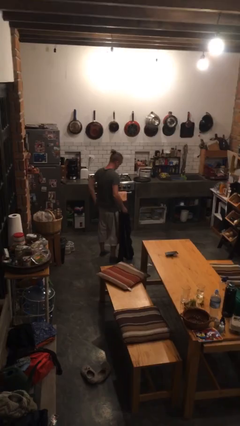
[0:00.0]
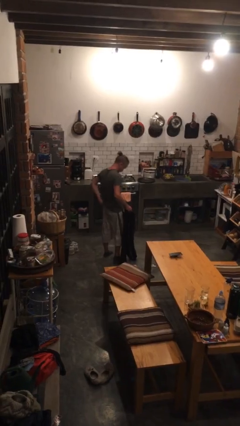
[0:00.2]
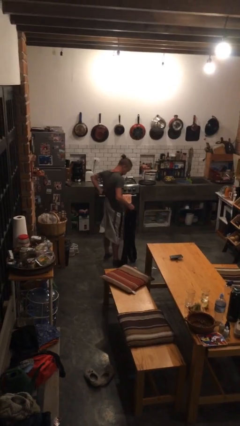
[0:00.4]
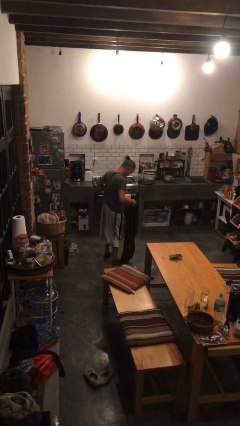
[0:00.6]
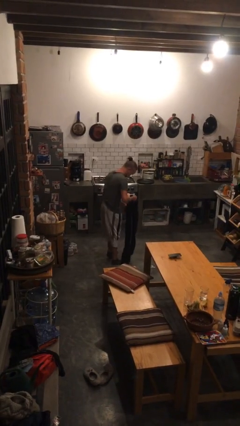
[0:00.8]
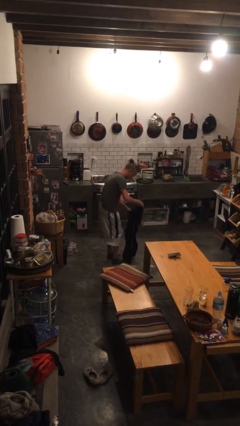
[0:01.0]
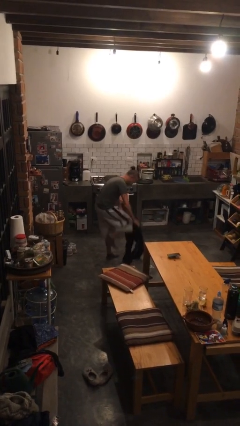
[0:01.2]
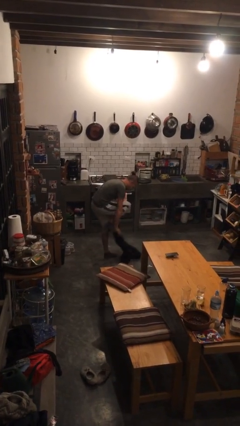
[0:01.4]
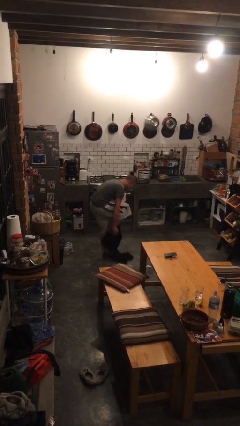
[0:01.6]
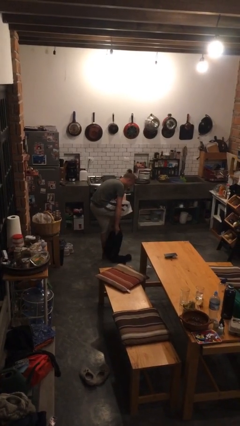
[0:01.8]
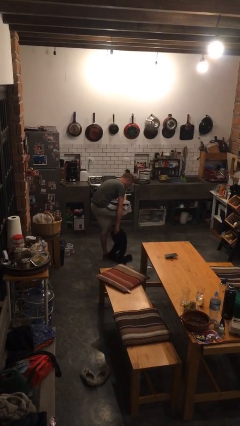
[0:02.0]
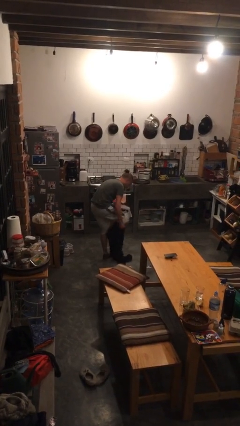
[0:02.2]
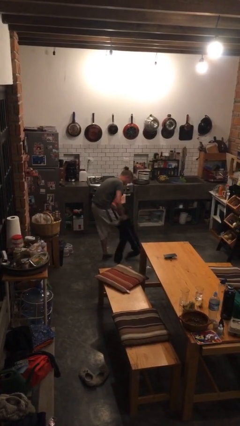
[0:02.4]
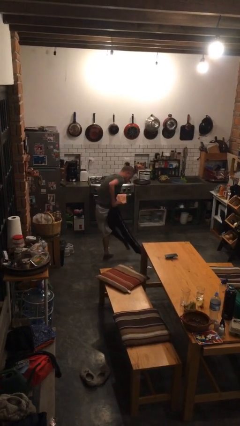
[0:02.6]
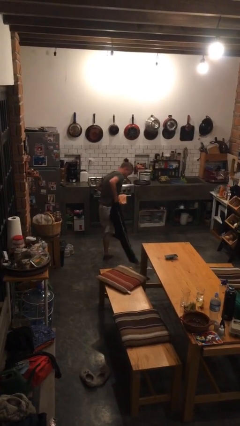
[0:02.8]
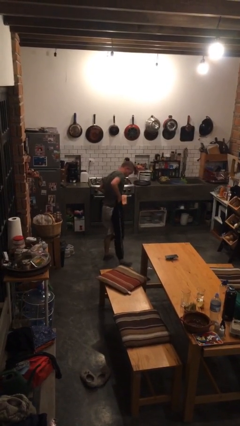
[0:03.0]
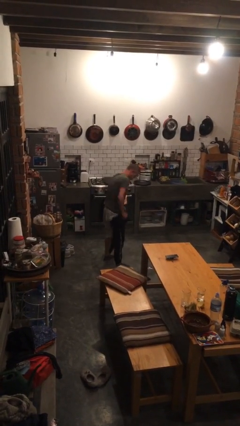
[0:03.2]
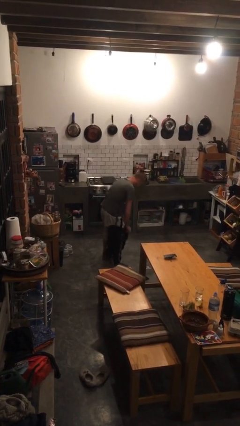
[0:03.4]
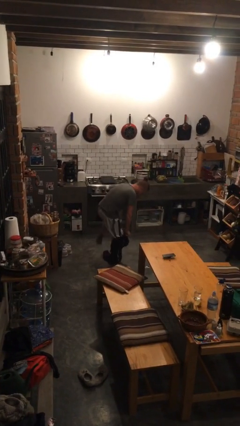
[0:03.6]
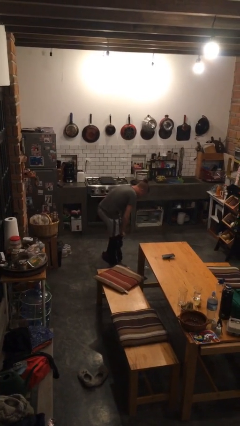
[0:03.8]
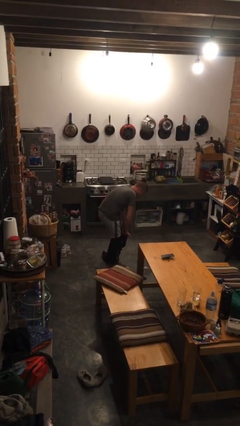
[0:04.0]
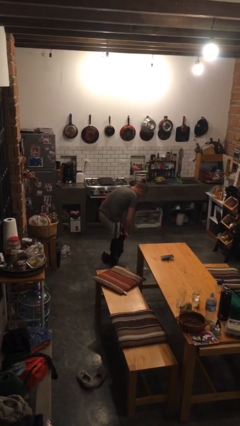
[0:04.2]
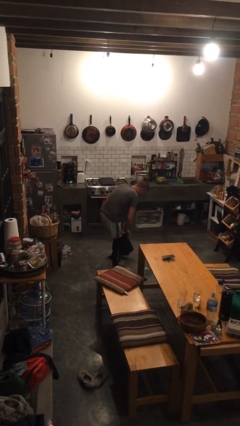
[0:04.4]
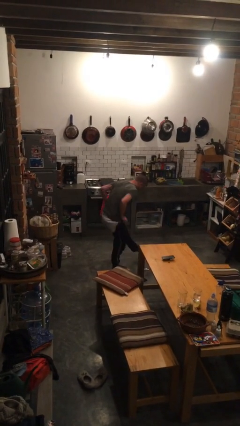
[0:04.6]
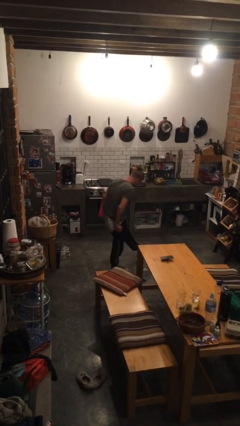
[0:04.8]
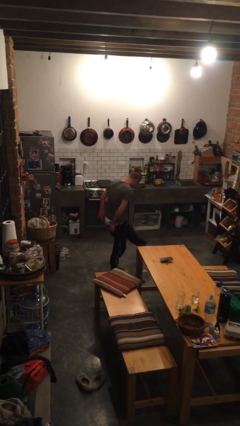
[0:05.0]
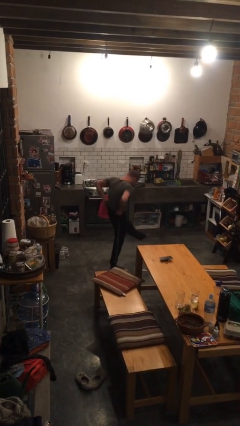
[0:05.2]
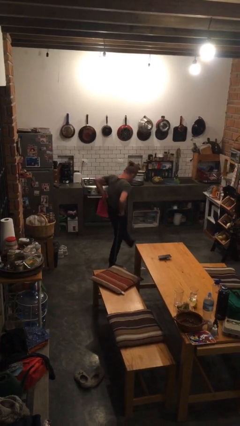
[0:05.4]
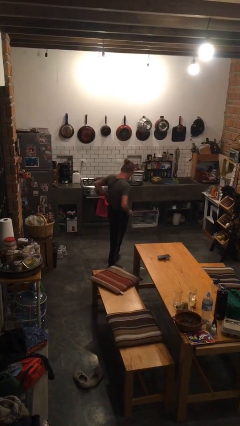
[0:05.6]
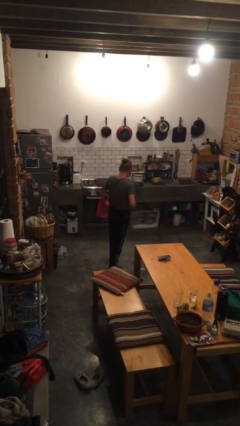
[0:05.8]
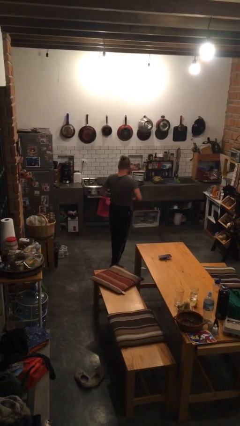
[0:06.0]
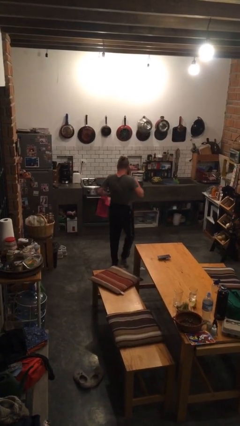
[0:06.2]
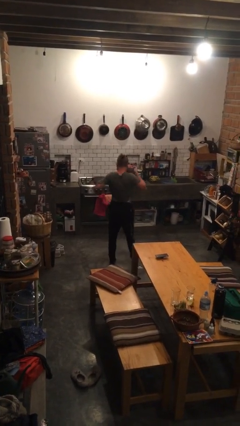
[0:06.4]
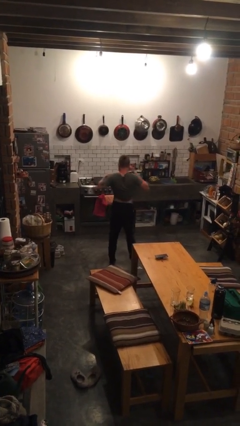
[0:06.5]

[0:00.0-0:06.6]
person puts on pants

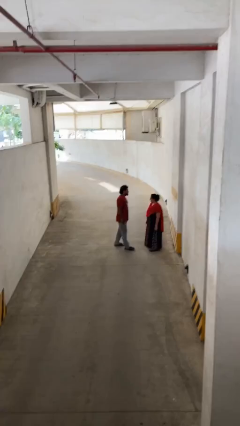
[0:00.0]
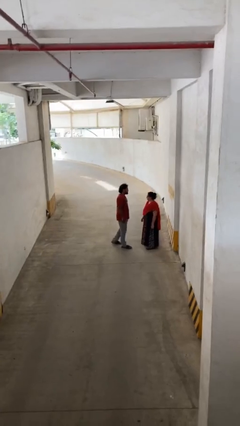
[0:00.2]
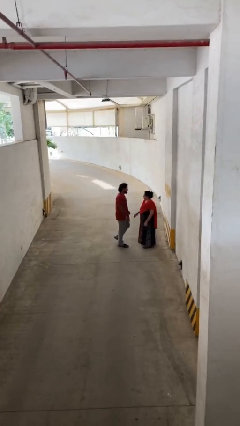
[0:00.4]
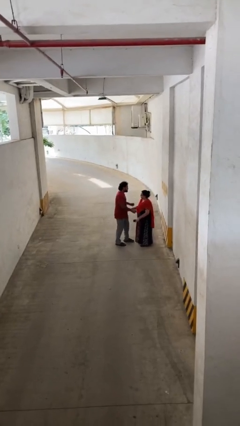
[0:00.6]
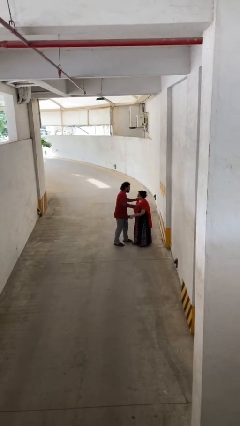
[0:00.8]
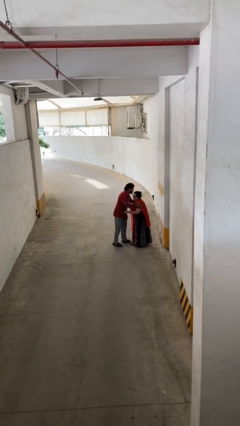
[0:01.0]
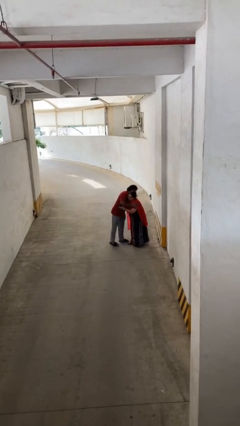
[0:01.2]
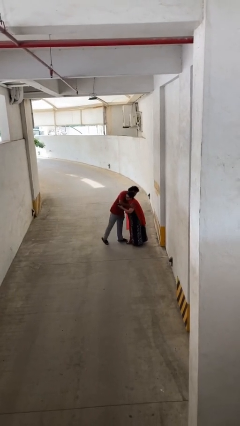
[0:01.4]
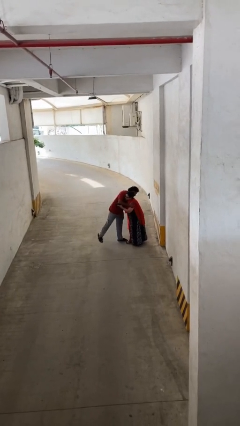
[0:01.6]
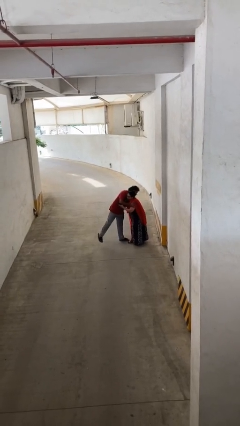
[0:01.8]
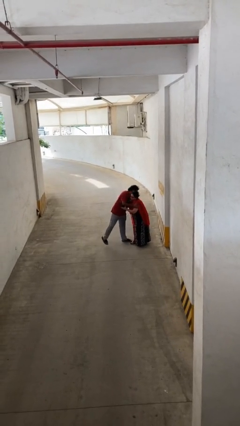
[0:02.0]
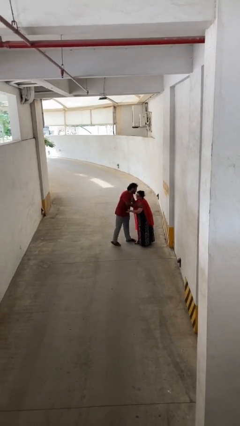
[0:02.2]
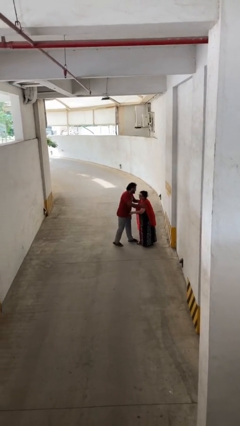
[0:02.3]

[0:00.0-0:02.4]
person embraces person

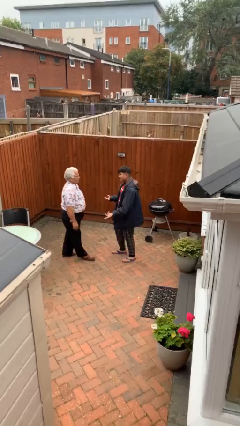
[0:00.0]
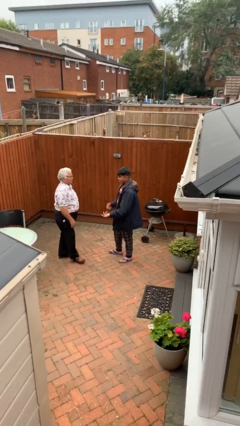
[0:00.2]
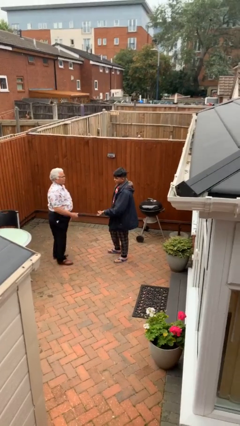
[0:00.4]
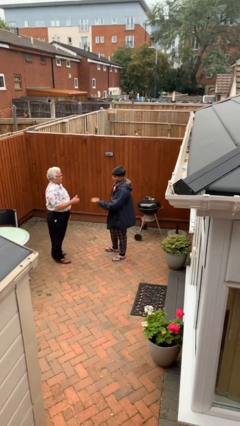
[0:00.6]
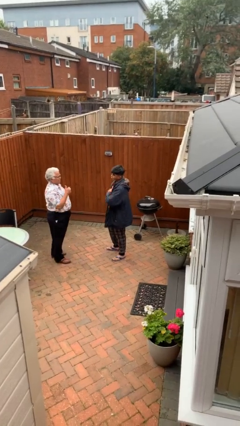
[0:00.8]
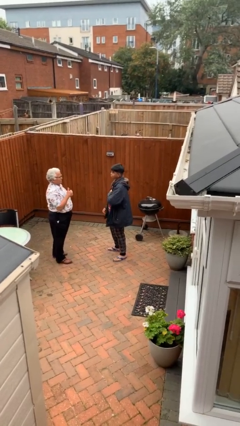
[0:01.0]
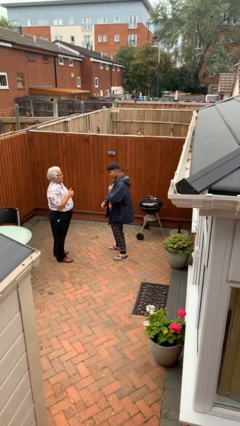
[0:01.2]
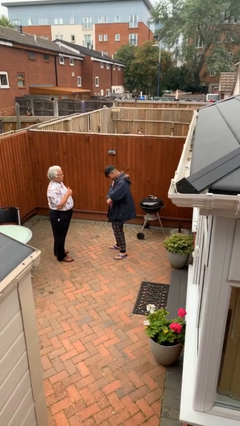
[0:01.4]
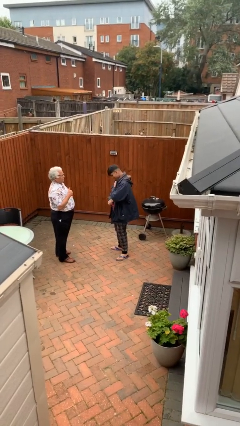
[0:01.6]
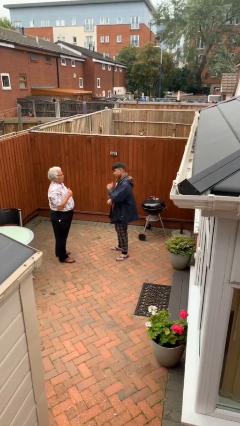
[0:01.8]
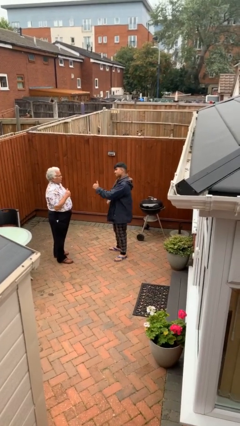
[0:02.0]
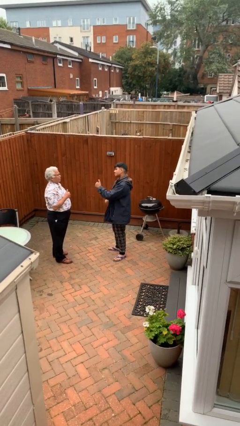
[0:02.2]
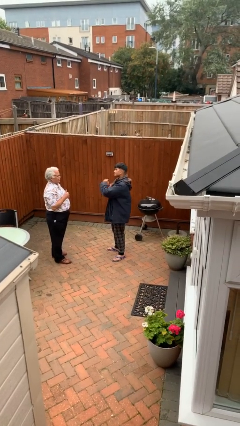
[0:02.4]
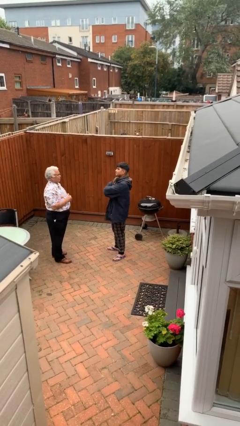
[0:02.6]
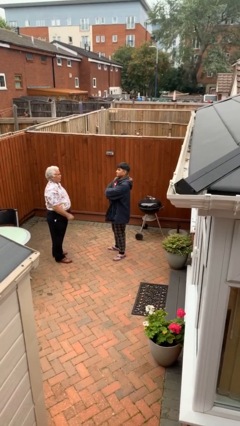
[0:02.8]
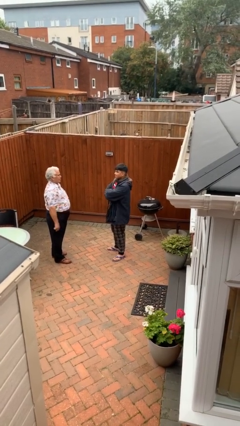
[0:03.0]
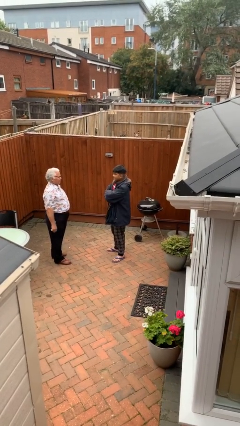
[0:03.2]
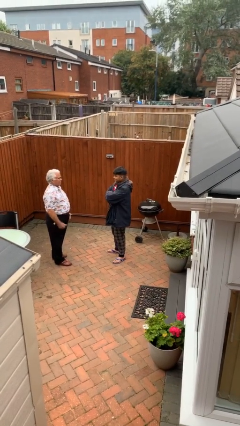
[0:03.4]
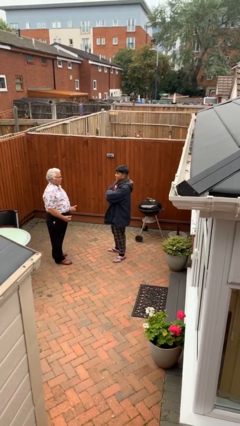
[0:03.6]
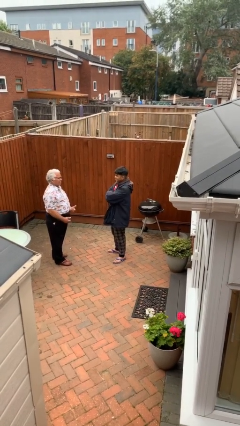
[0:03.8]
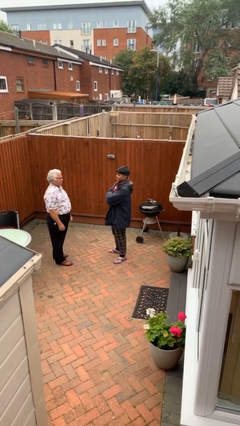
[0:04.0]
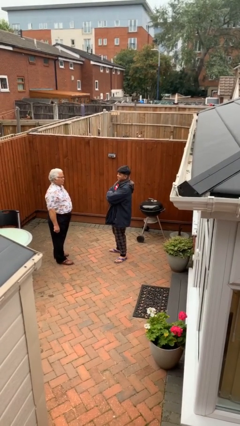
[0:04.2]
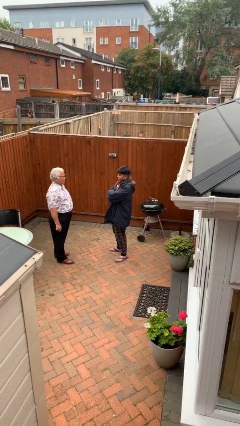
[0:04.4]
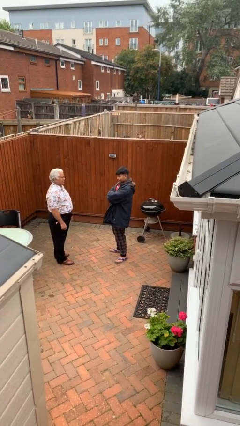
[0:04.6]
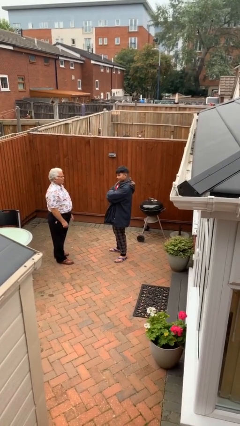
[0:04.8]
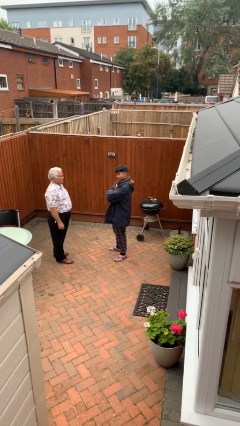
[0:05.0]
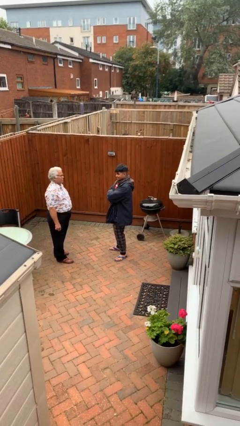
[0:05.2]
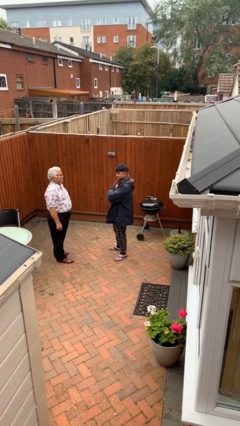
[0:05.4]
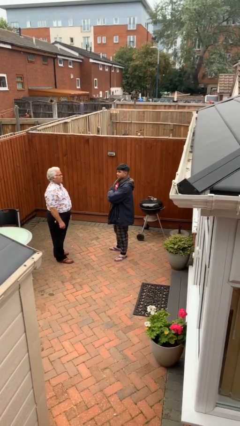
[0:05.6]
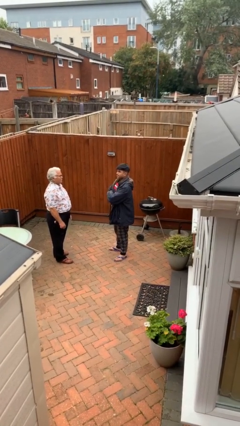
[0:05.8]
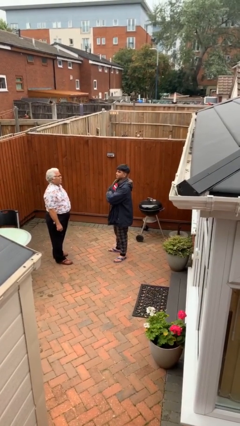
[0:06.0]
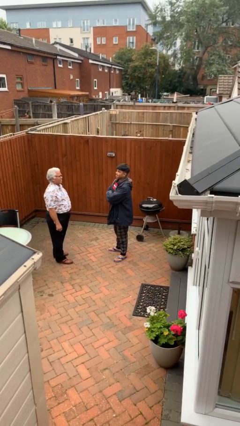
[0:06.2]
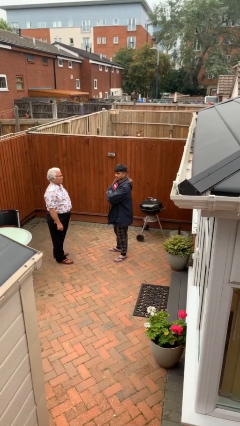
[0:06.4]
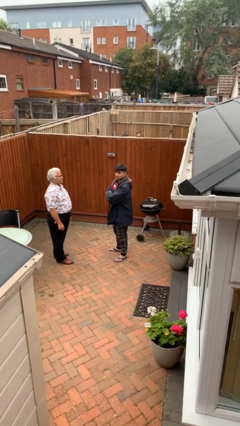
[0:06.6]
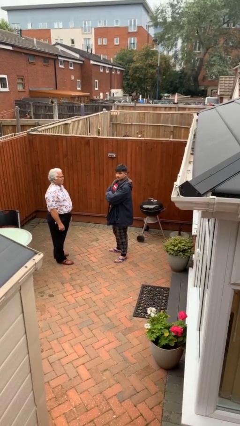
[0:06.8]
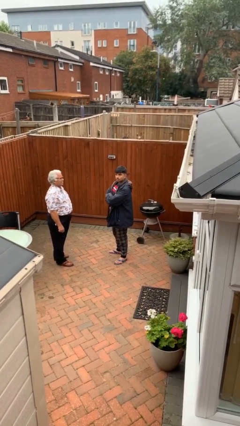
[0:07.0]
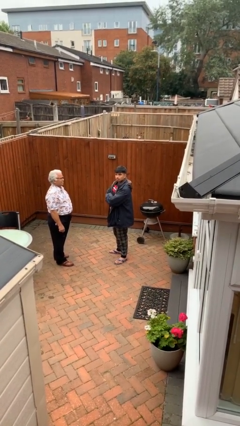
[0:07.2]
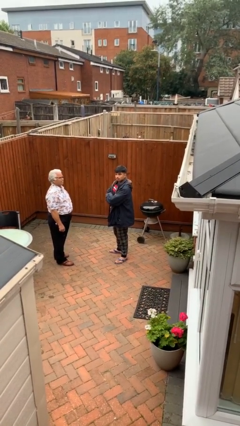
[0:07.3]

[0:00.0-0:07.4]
person talks to person

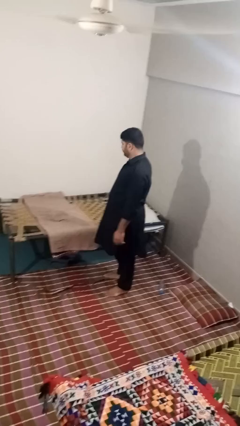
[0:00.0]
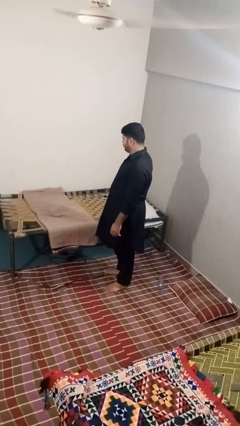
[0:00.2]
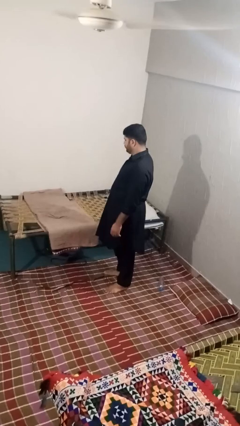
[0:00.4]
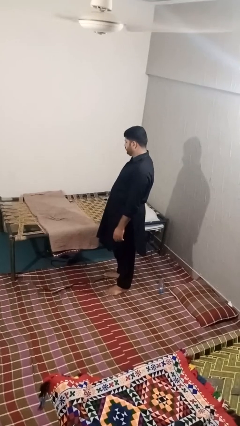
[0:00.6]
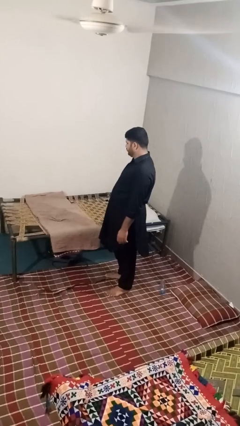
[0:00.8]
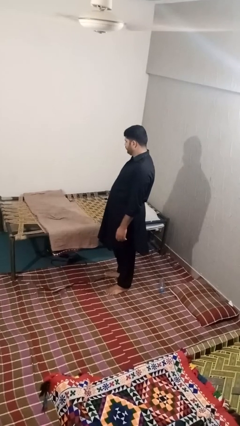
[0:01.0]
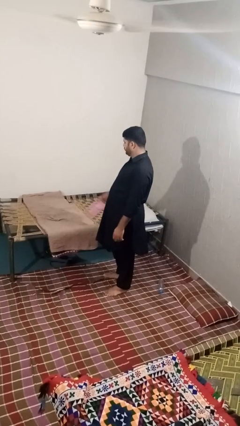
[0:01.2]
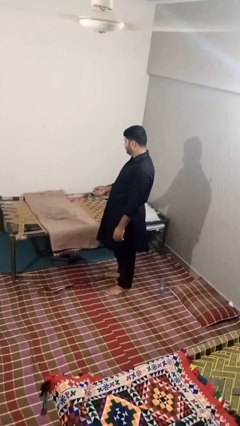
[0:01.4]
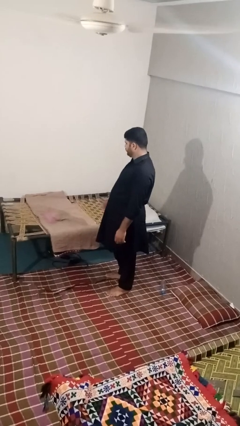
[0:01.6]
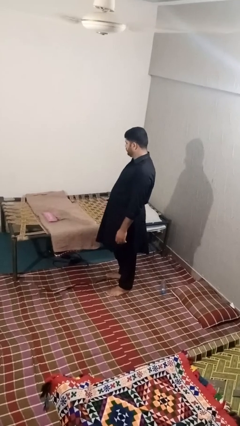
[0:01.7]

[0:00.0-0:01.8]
person puts down object on bed
